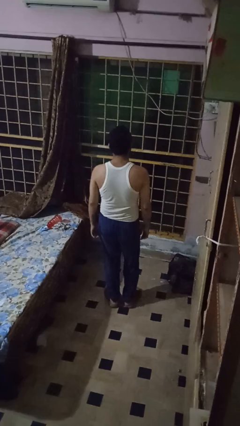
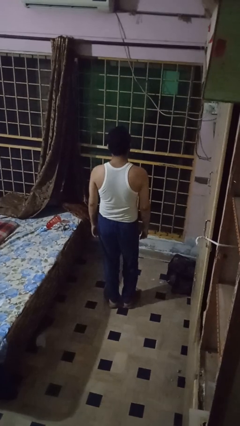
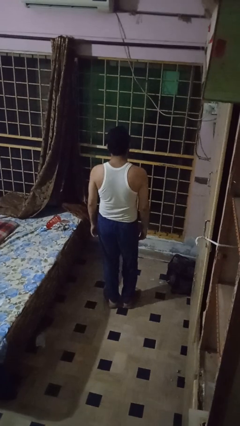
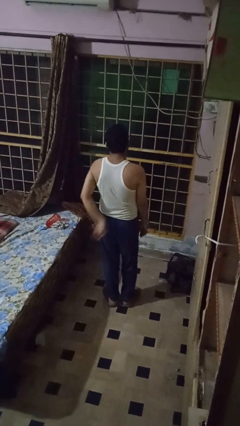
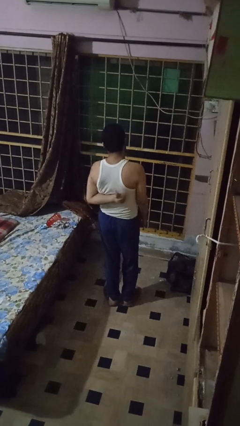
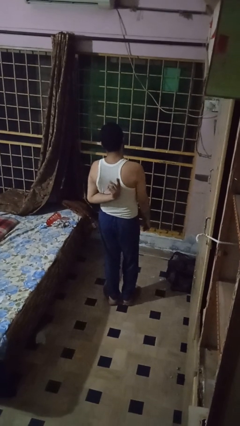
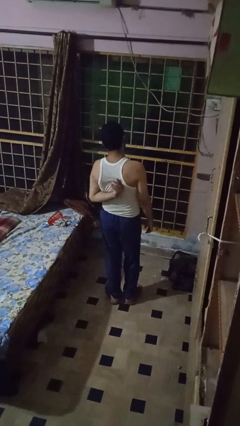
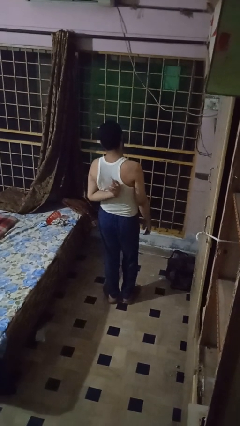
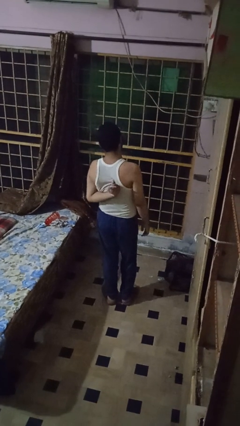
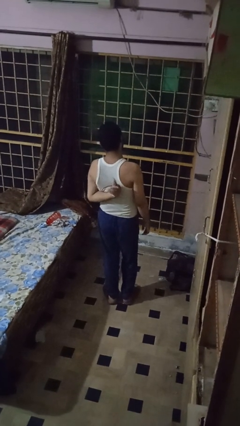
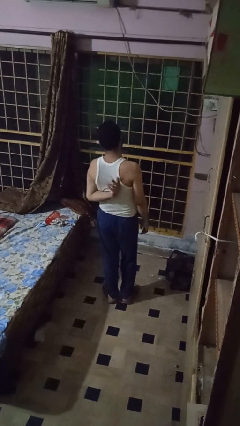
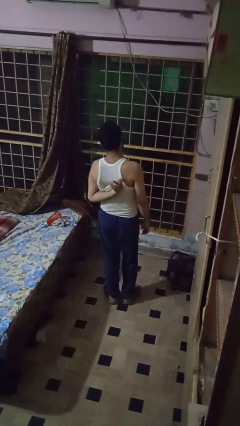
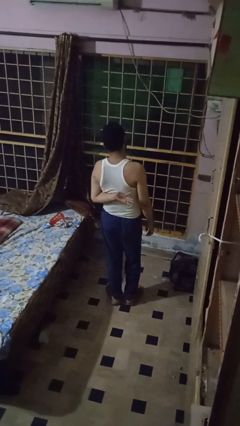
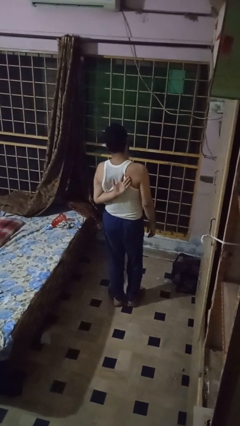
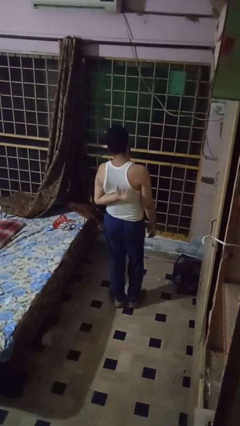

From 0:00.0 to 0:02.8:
person swats bug

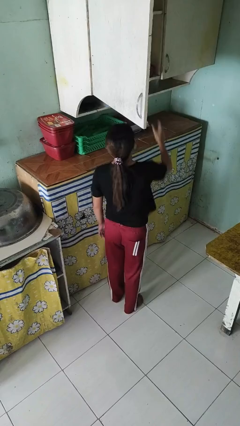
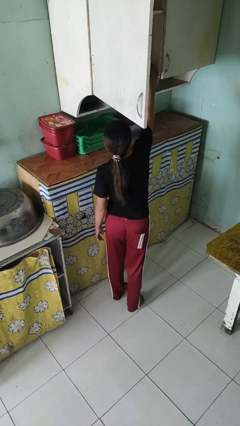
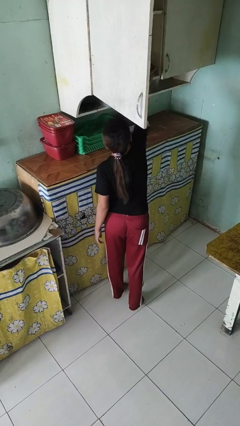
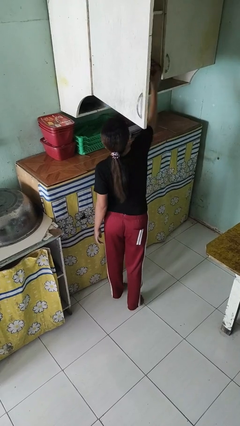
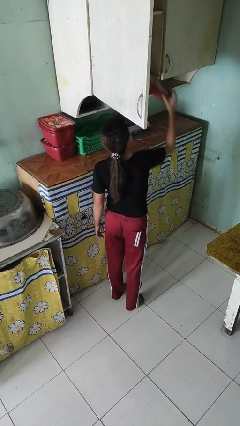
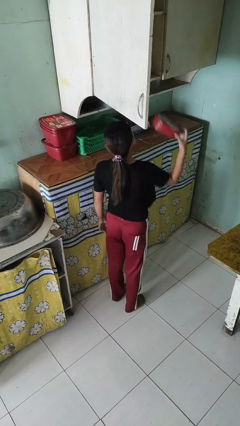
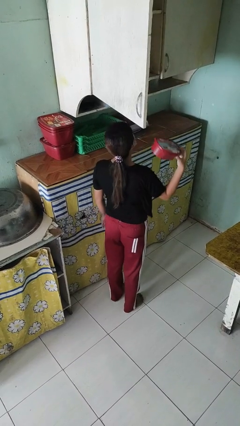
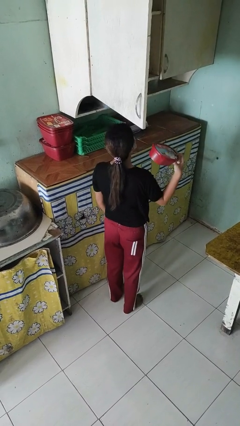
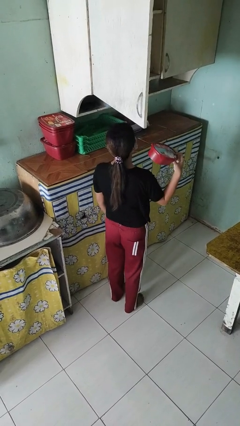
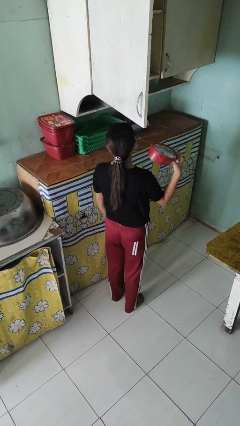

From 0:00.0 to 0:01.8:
person takes object from cabinet

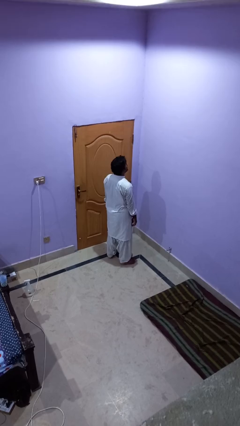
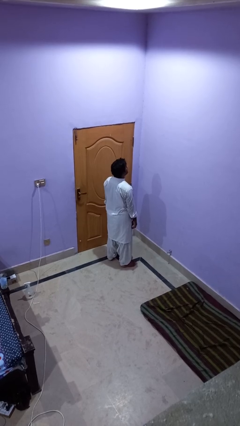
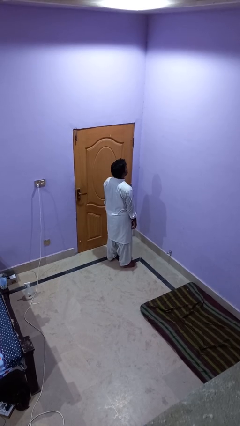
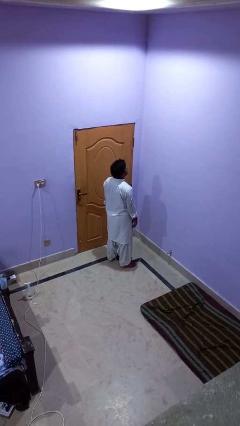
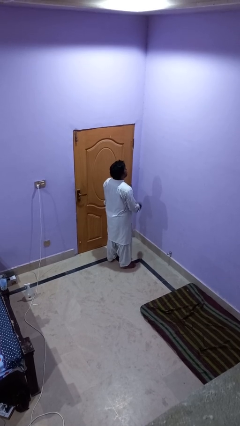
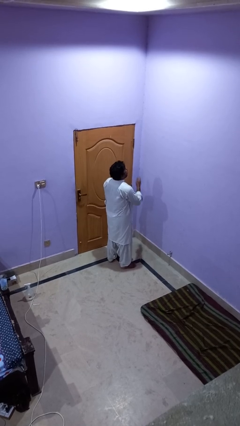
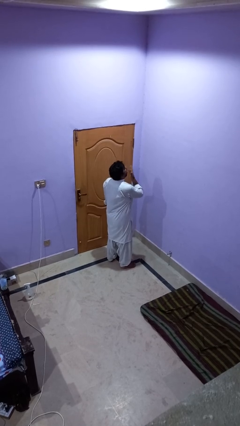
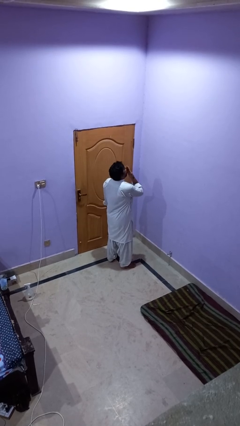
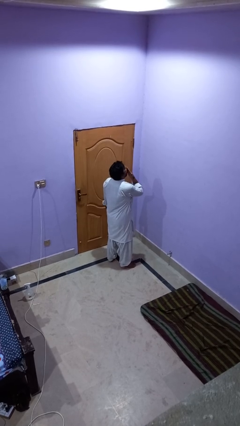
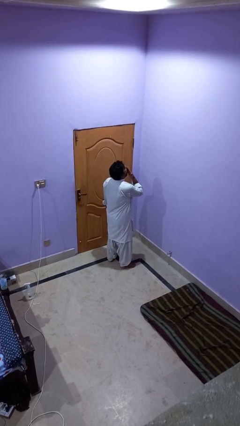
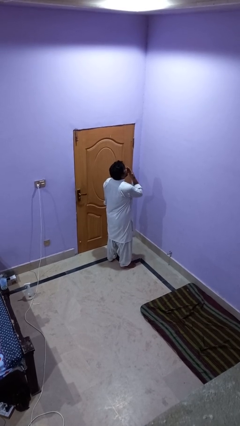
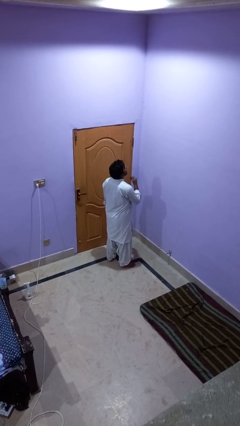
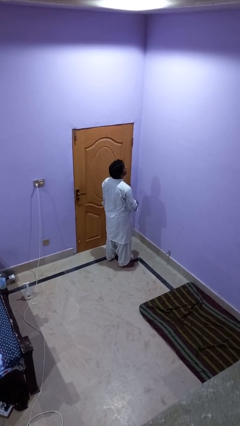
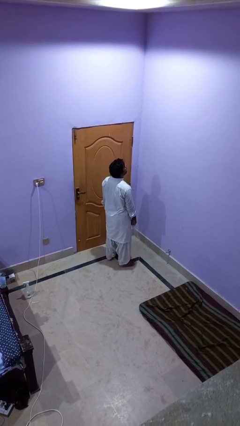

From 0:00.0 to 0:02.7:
person yawns

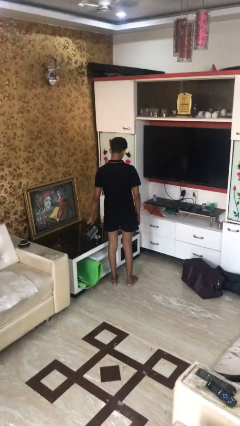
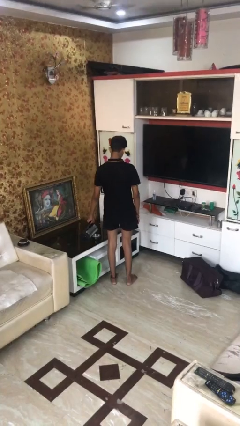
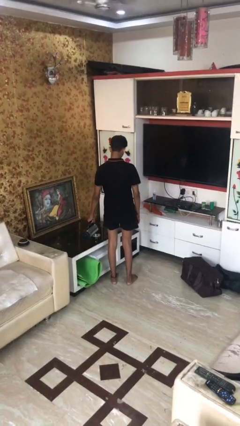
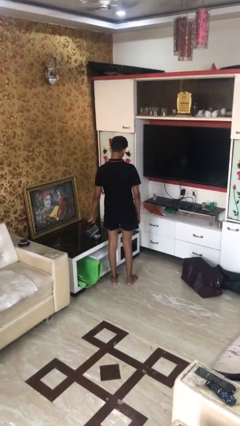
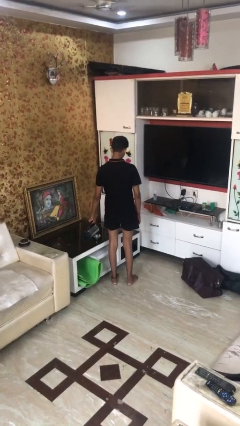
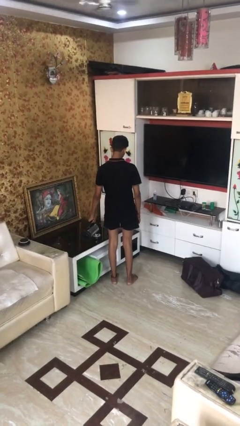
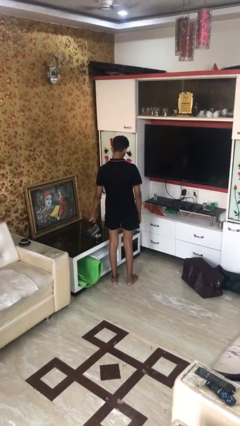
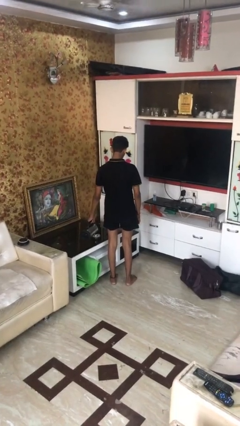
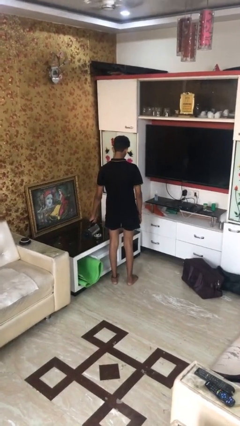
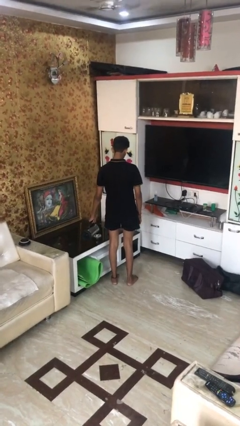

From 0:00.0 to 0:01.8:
person pours into bowl

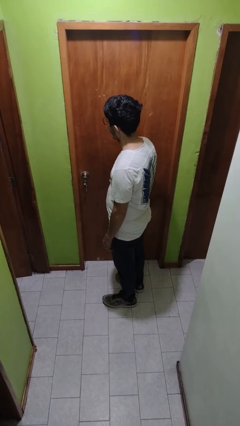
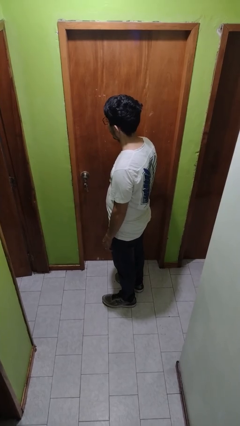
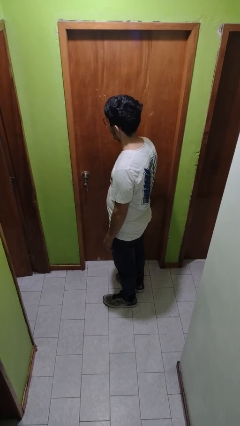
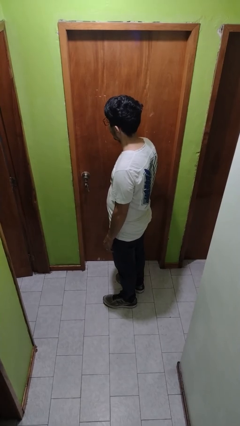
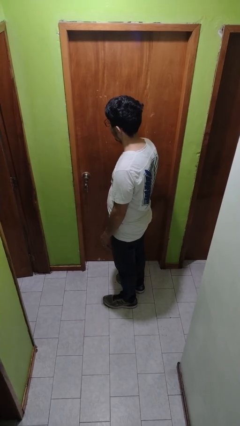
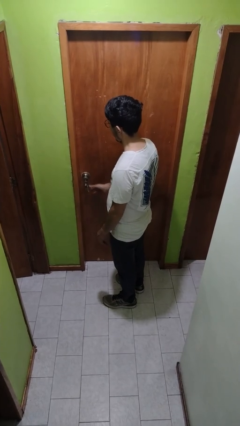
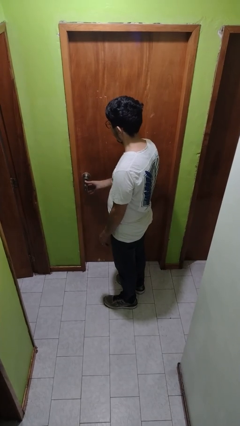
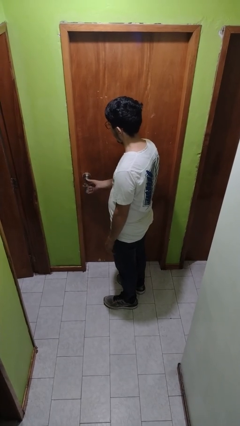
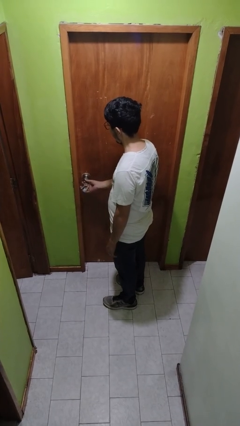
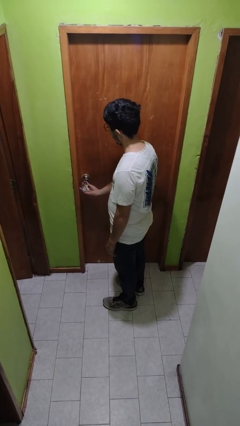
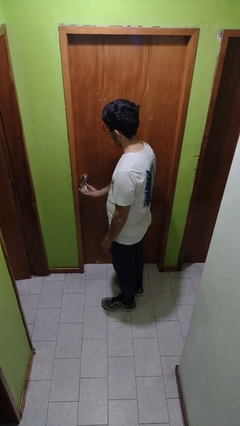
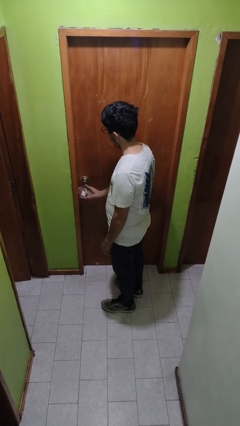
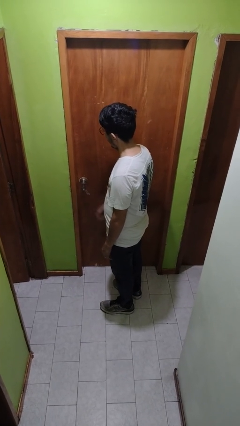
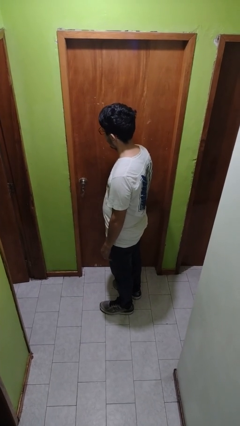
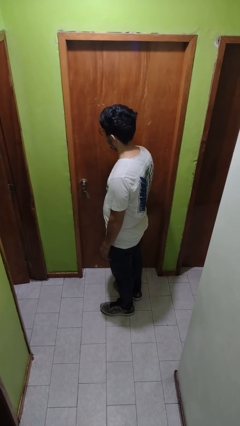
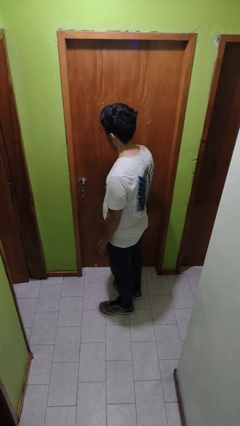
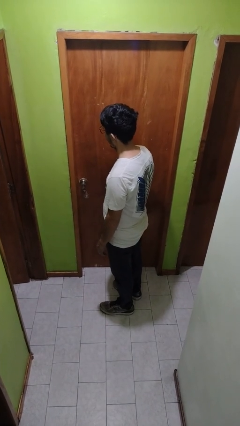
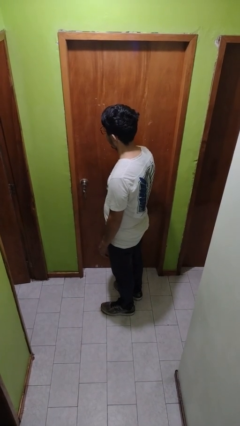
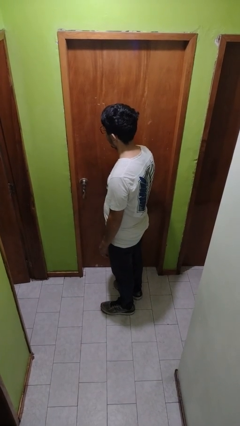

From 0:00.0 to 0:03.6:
person unlocks door with keys

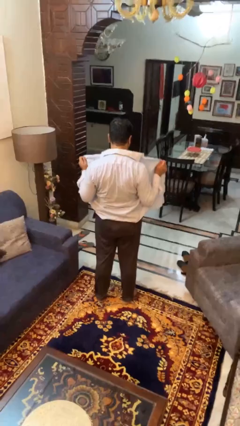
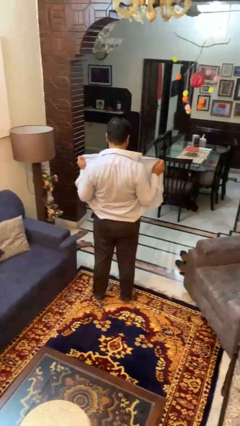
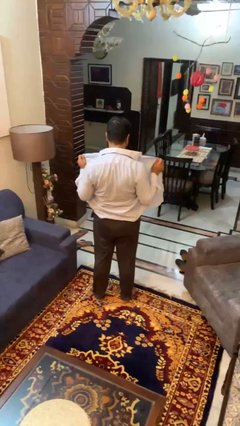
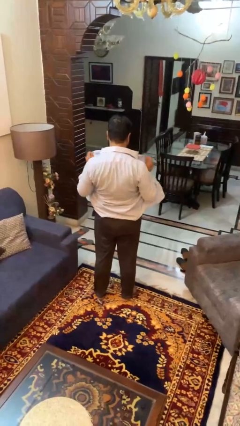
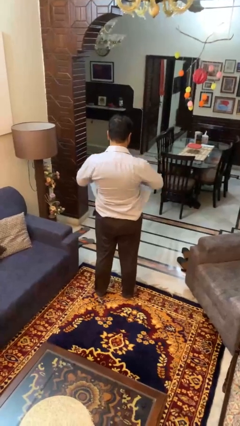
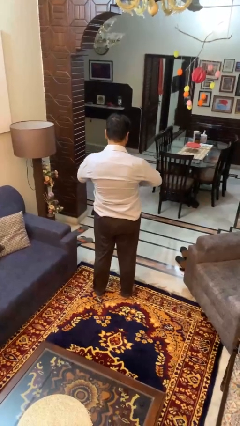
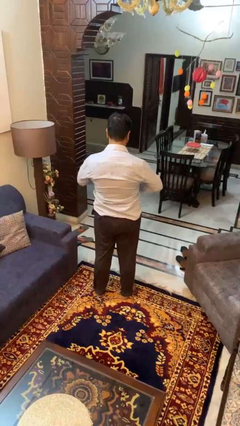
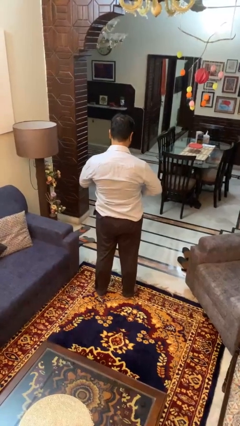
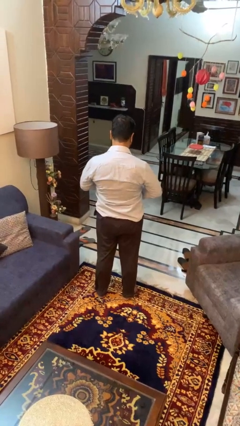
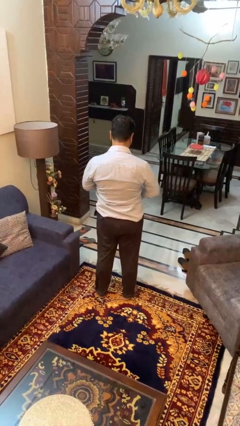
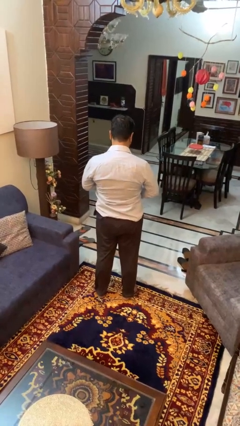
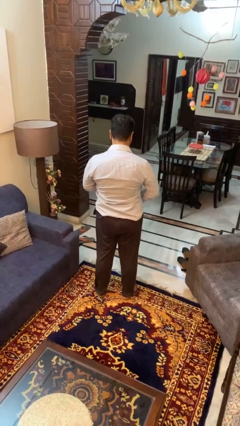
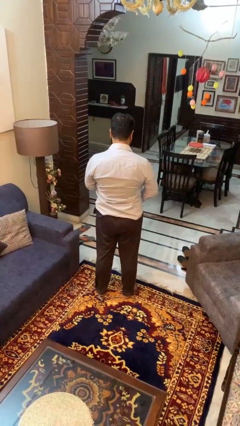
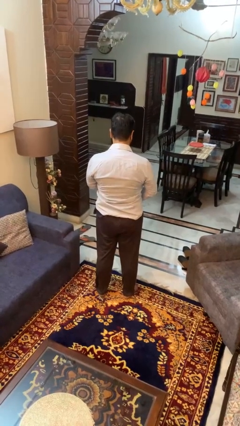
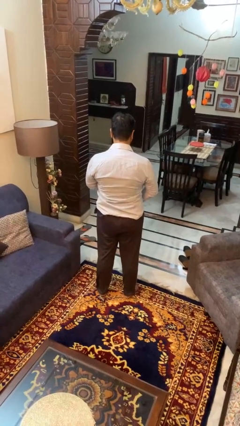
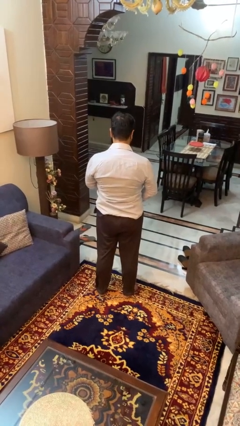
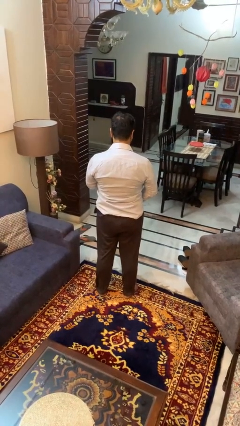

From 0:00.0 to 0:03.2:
person buttons shirt

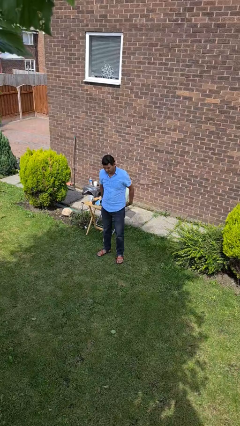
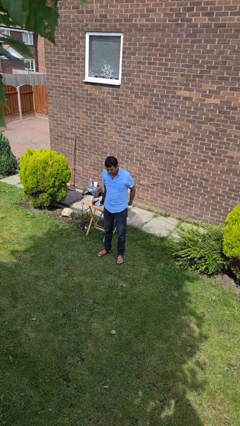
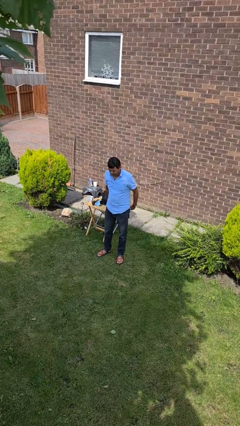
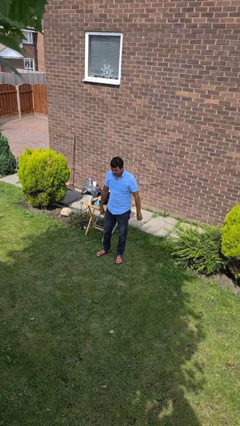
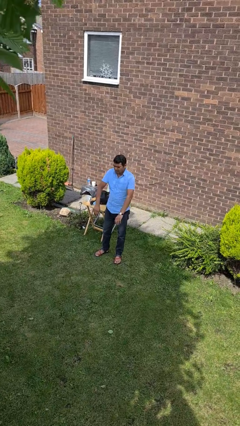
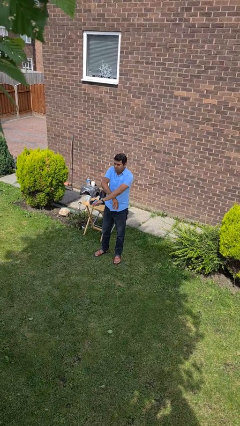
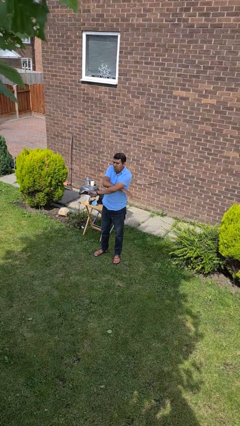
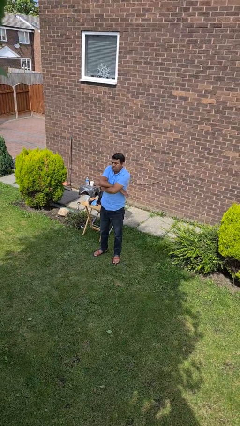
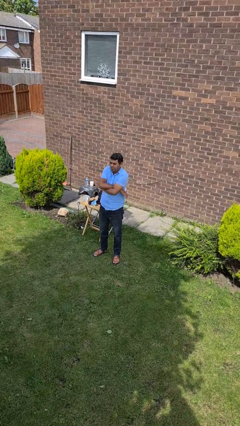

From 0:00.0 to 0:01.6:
person crosses arms
